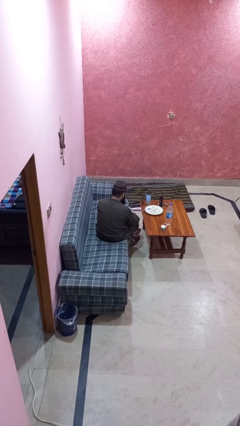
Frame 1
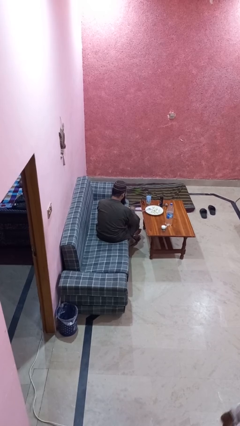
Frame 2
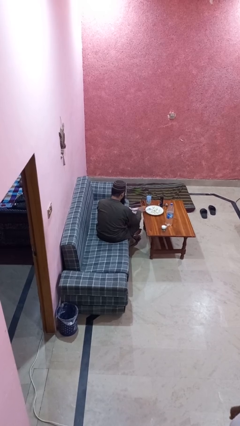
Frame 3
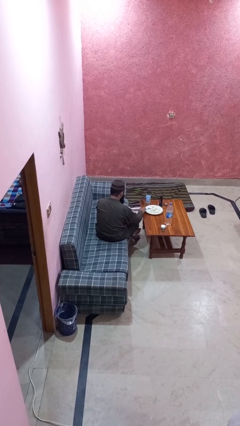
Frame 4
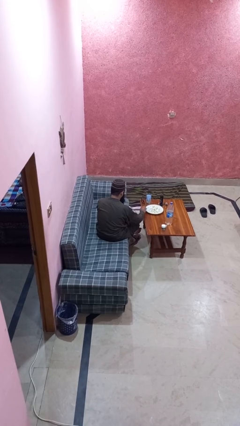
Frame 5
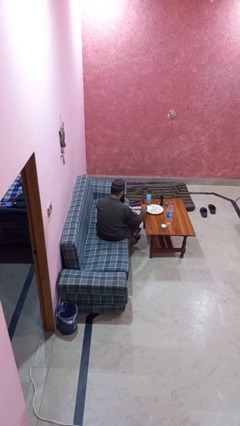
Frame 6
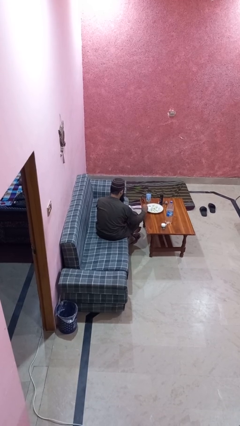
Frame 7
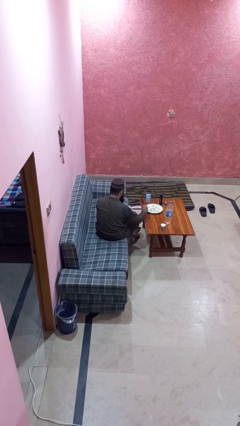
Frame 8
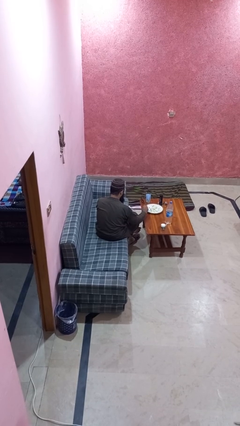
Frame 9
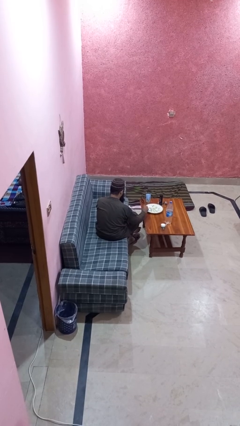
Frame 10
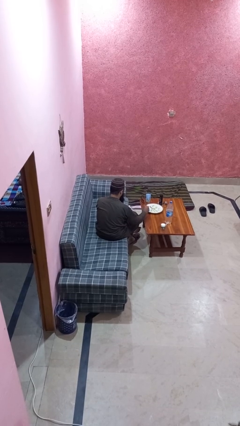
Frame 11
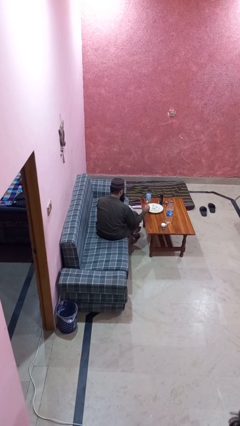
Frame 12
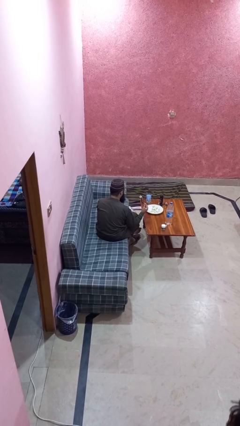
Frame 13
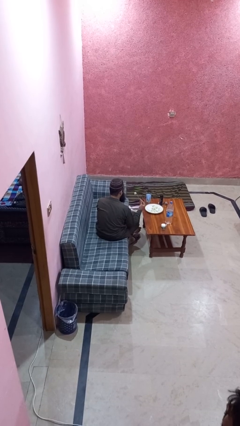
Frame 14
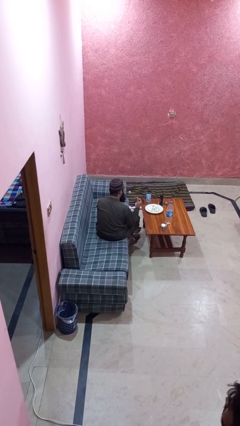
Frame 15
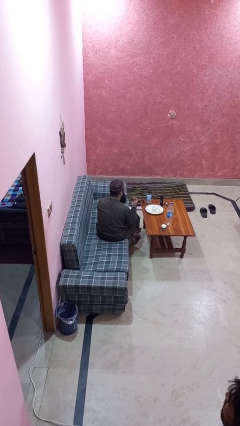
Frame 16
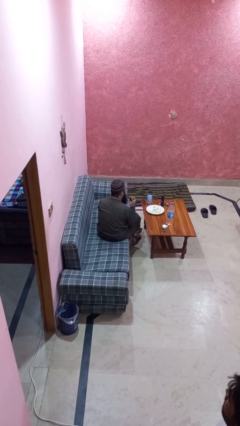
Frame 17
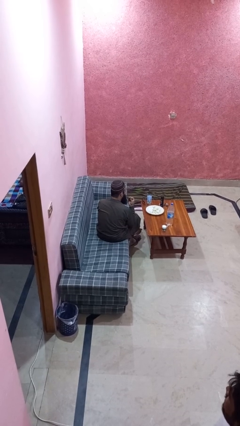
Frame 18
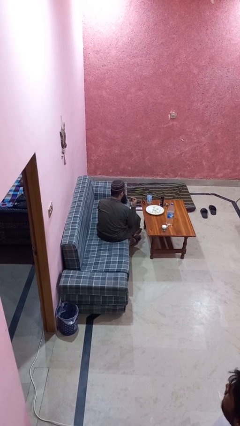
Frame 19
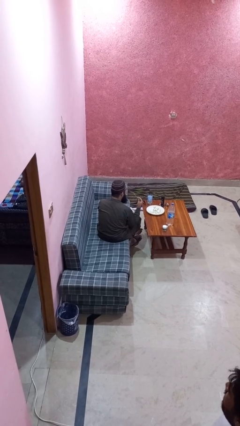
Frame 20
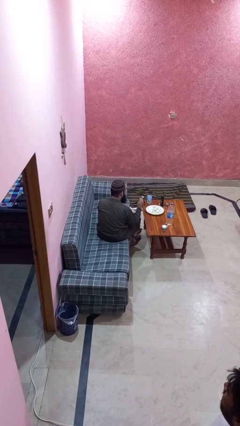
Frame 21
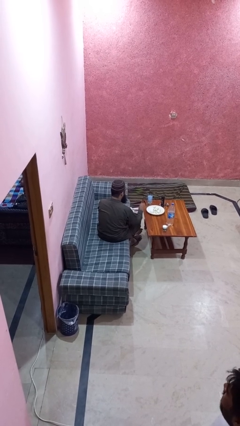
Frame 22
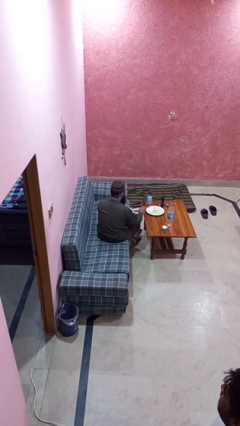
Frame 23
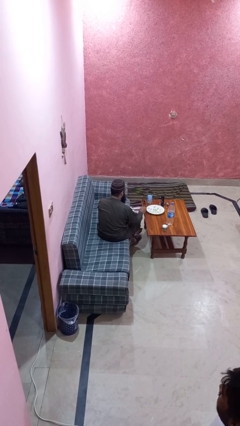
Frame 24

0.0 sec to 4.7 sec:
person eats with utensil

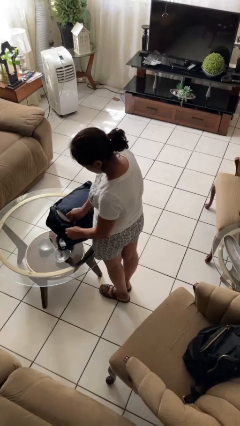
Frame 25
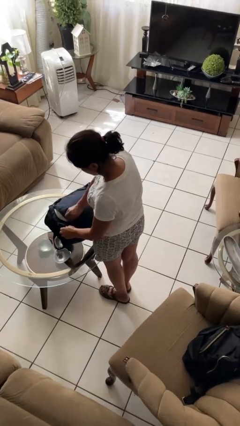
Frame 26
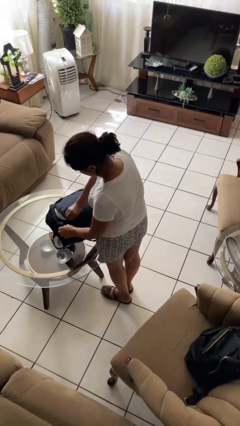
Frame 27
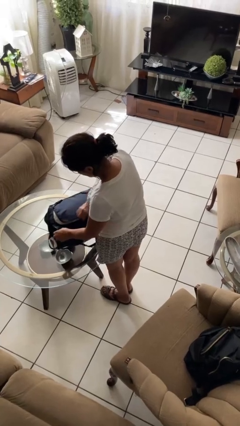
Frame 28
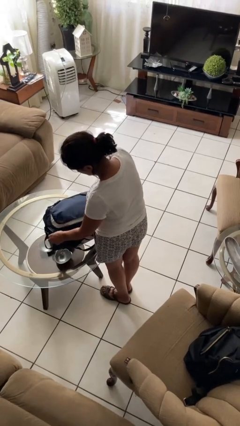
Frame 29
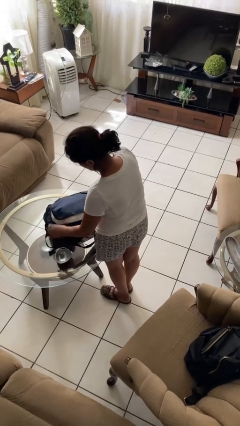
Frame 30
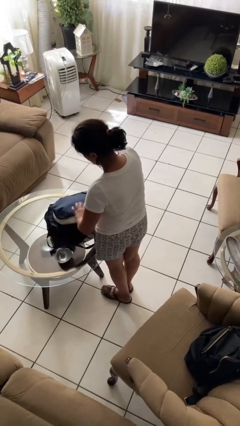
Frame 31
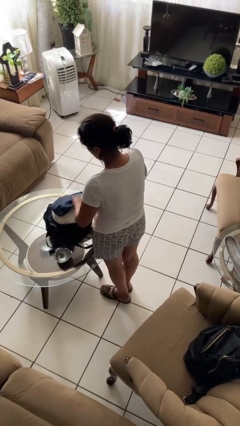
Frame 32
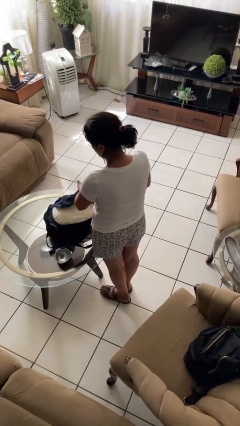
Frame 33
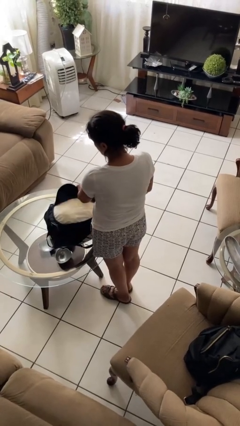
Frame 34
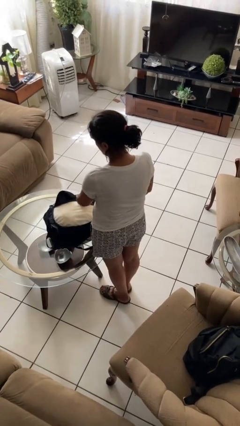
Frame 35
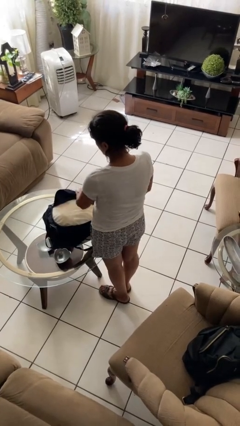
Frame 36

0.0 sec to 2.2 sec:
person opens suitcase

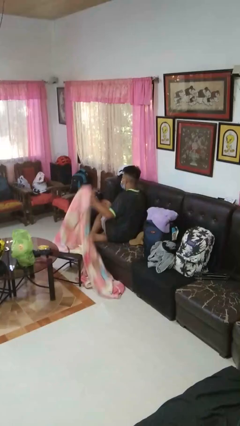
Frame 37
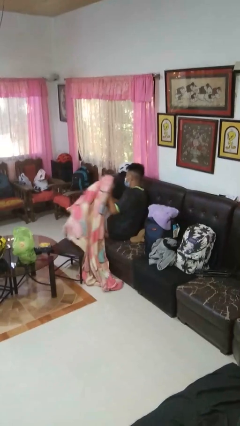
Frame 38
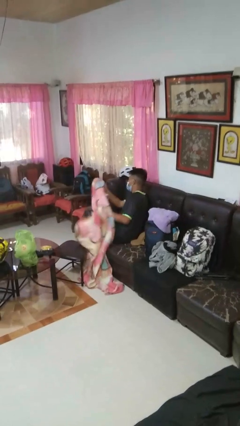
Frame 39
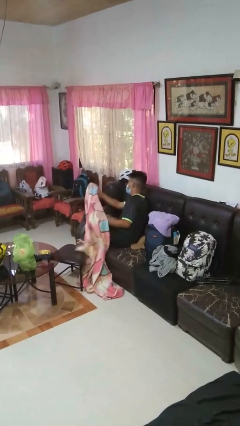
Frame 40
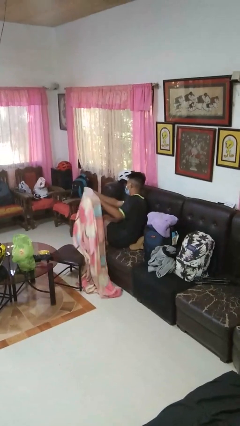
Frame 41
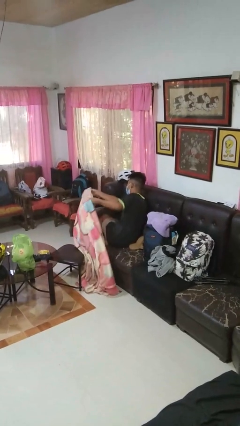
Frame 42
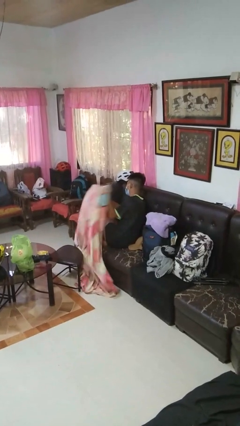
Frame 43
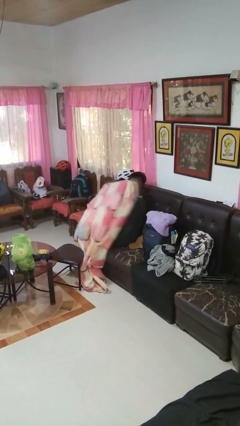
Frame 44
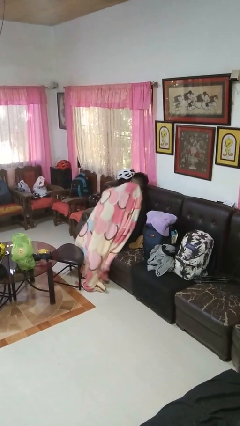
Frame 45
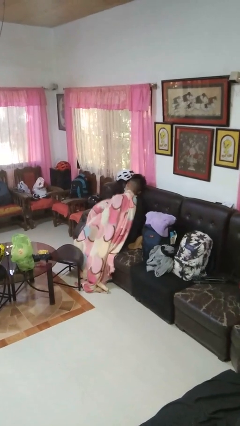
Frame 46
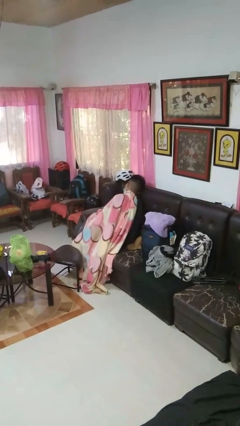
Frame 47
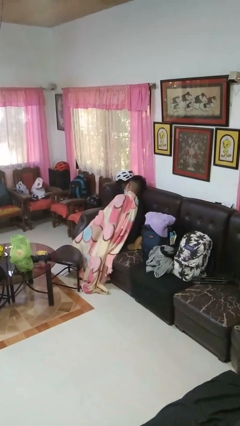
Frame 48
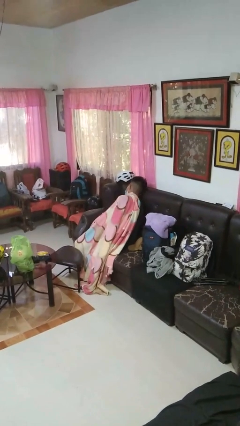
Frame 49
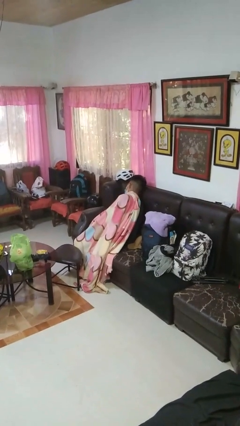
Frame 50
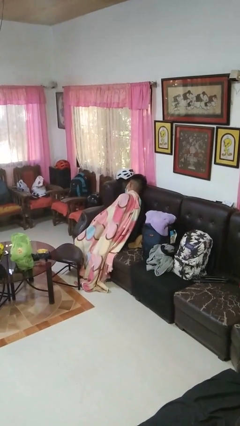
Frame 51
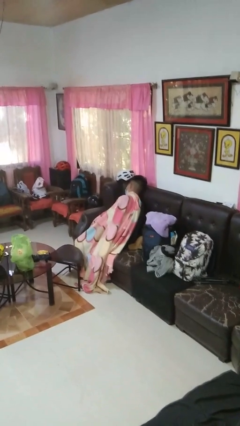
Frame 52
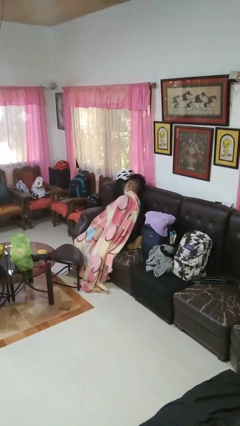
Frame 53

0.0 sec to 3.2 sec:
person covers with blanket

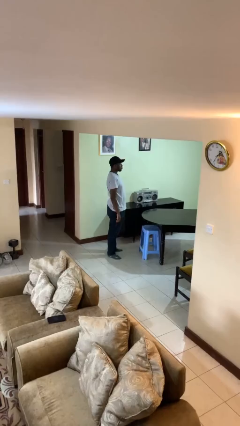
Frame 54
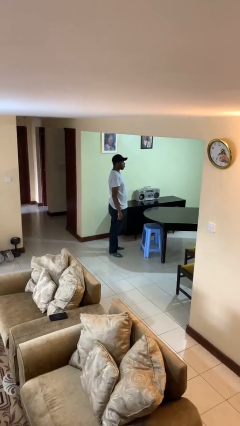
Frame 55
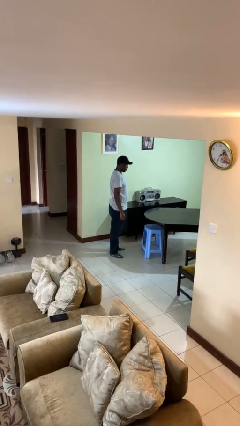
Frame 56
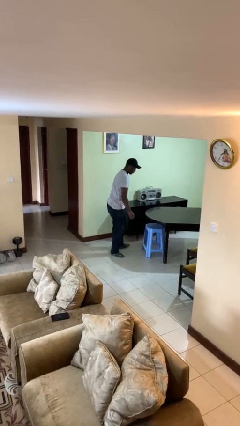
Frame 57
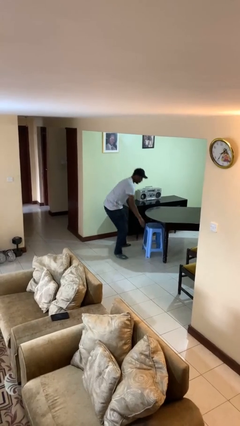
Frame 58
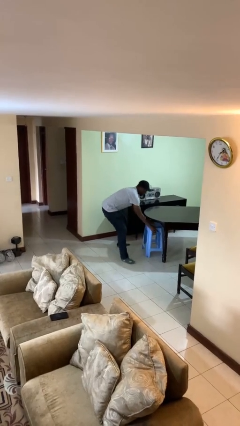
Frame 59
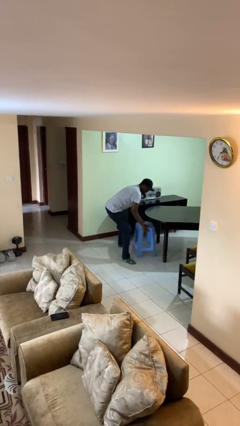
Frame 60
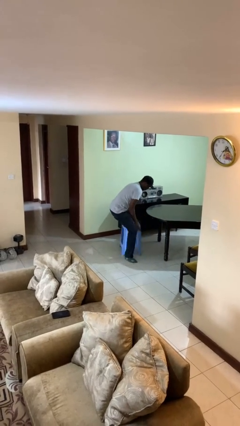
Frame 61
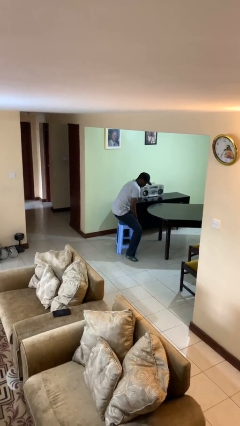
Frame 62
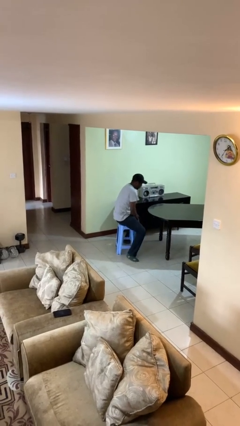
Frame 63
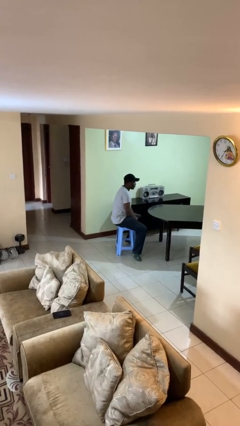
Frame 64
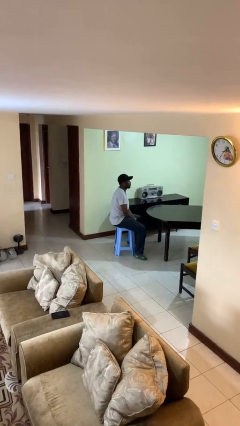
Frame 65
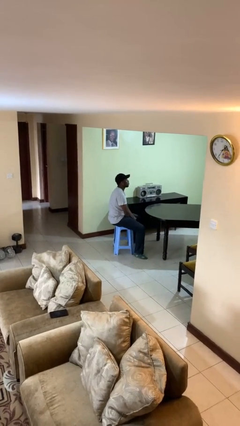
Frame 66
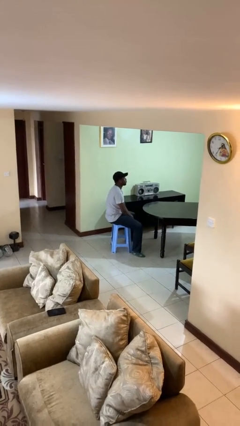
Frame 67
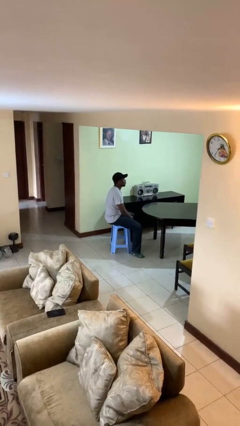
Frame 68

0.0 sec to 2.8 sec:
person sits down

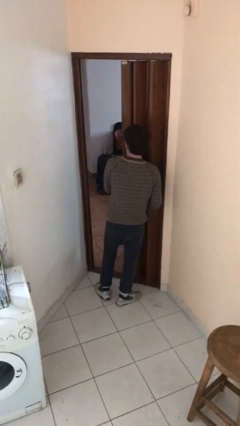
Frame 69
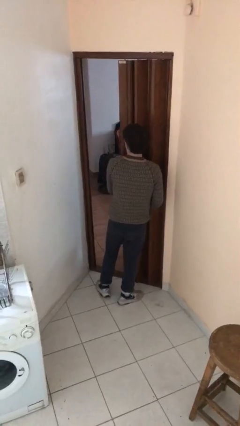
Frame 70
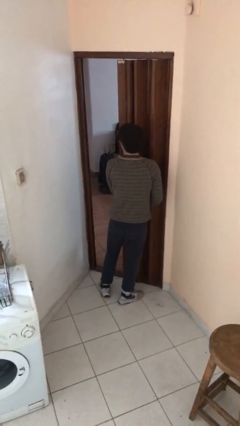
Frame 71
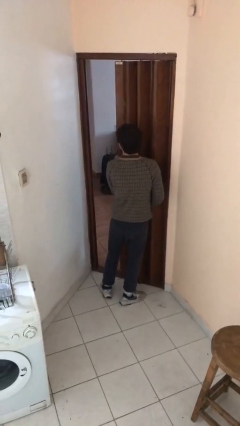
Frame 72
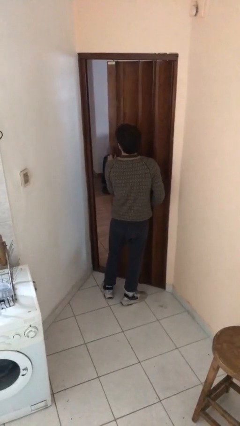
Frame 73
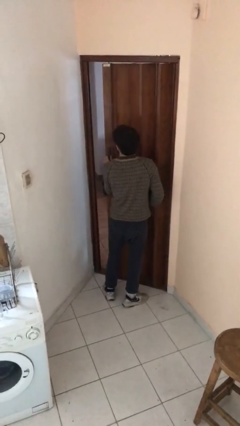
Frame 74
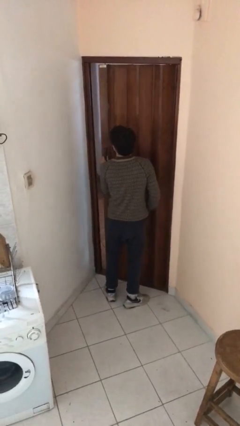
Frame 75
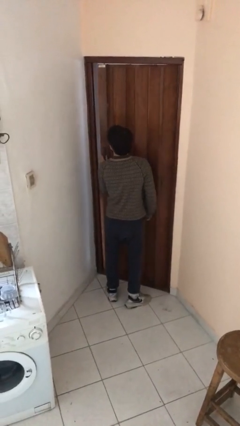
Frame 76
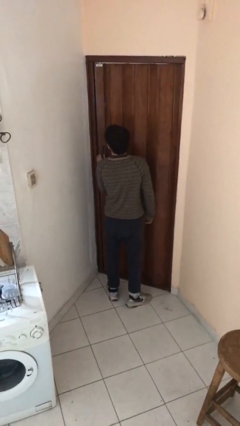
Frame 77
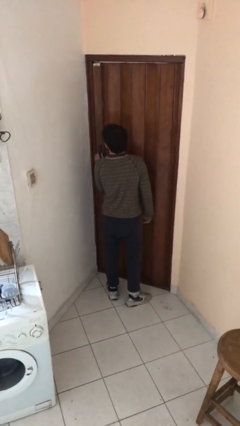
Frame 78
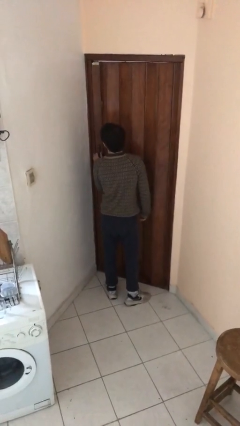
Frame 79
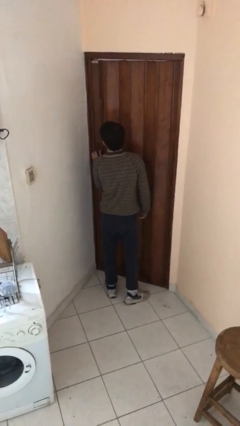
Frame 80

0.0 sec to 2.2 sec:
person closes sliding door

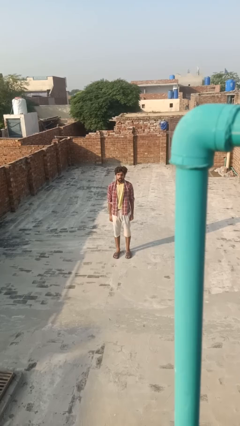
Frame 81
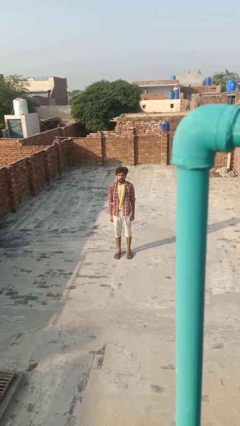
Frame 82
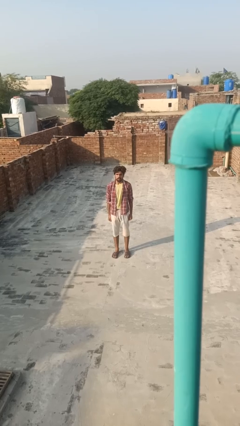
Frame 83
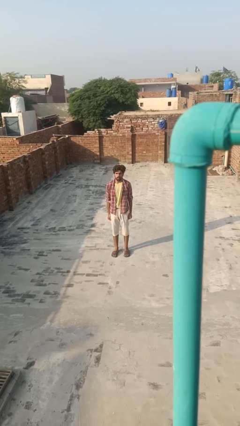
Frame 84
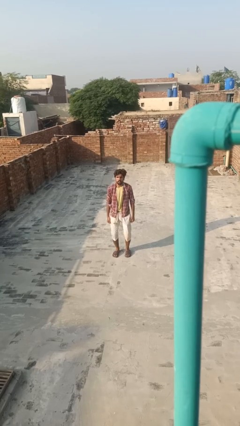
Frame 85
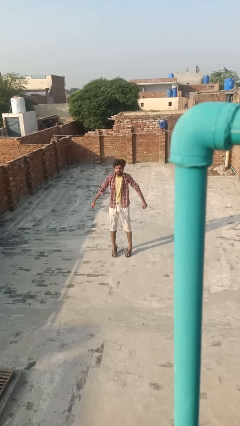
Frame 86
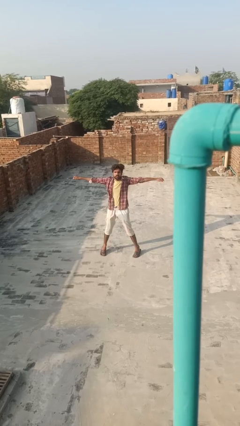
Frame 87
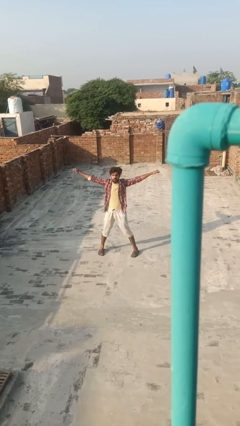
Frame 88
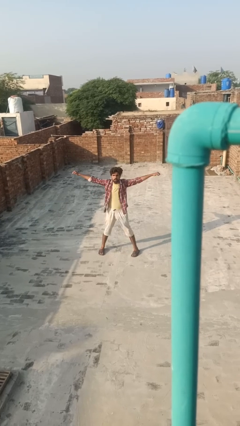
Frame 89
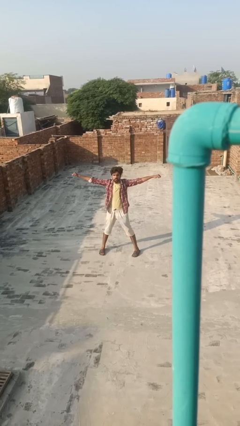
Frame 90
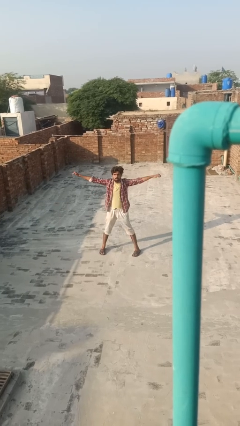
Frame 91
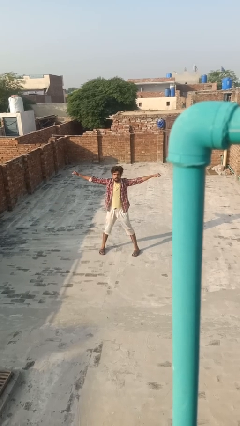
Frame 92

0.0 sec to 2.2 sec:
person exercises with jumping jacks

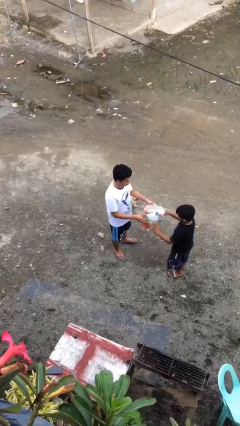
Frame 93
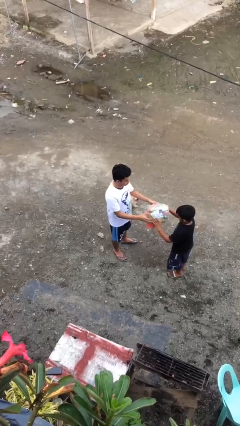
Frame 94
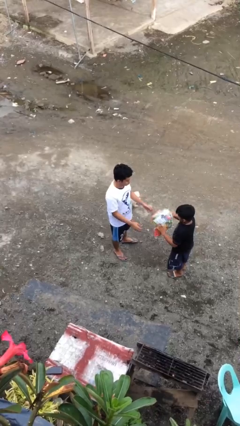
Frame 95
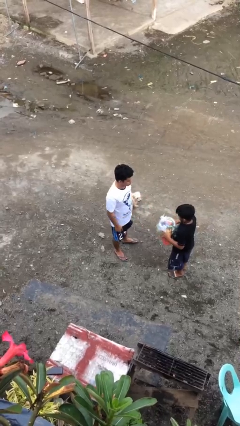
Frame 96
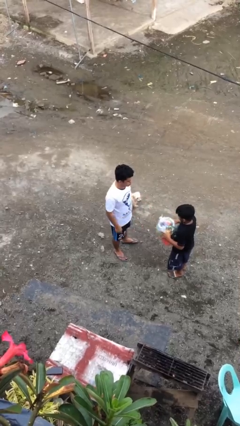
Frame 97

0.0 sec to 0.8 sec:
person transfers object to person
